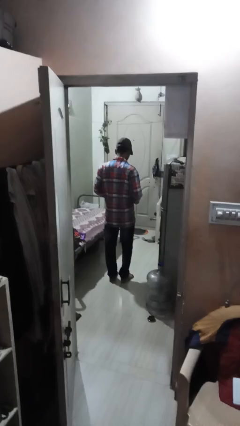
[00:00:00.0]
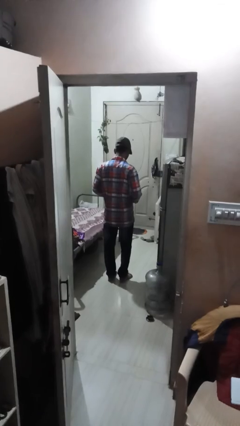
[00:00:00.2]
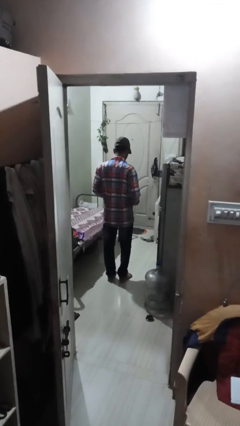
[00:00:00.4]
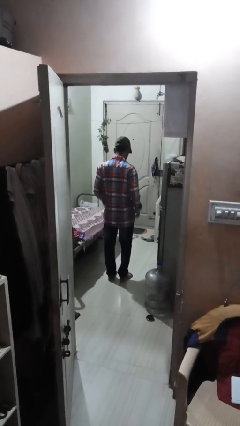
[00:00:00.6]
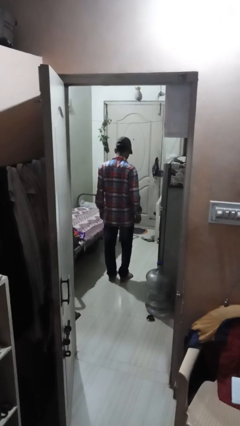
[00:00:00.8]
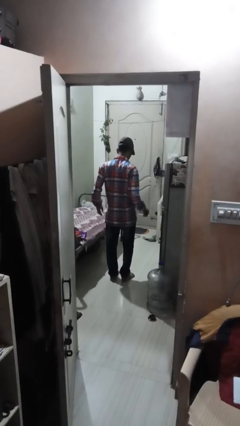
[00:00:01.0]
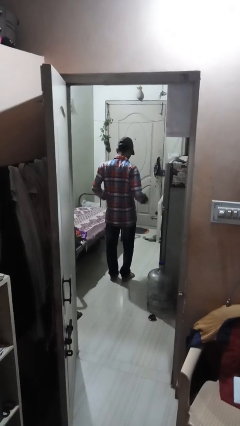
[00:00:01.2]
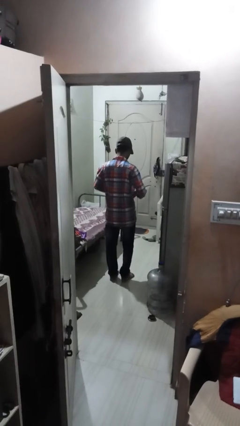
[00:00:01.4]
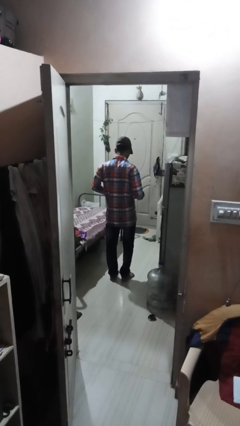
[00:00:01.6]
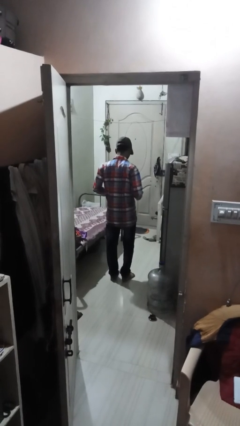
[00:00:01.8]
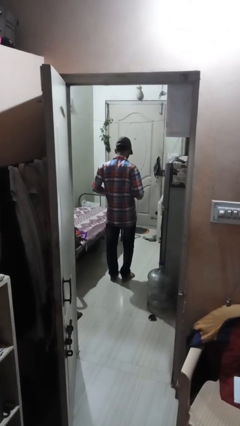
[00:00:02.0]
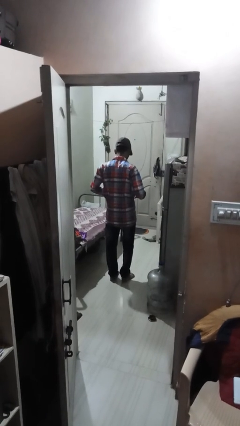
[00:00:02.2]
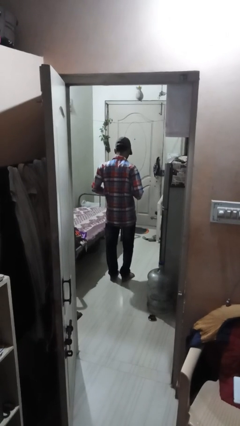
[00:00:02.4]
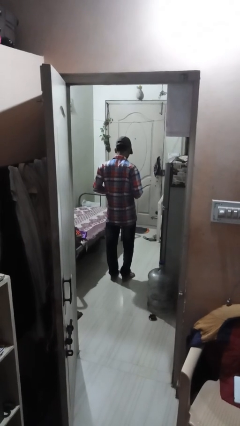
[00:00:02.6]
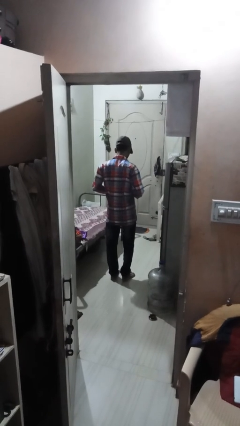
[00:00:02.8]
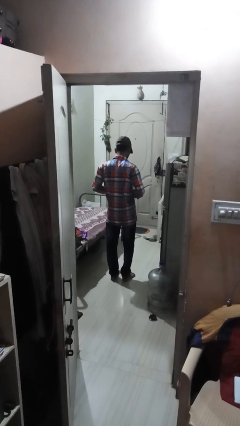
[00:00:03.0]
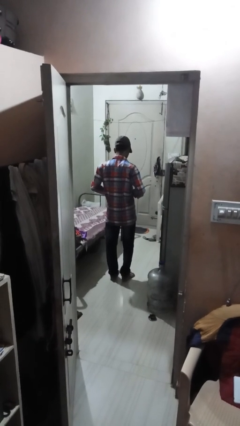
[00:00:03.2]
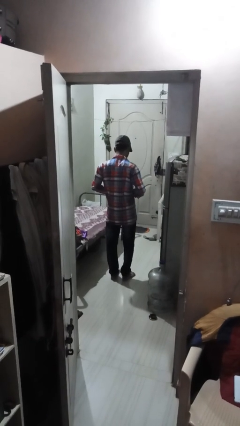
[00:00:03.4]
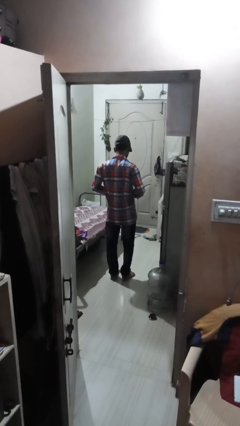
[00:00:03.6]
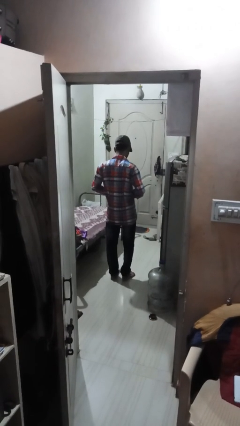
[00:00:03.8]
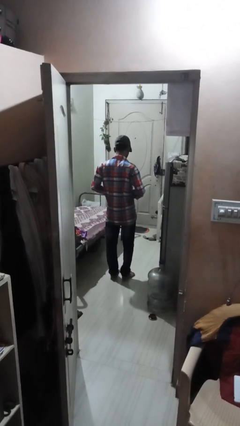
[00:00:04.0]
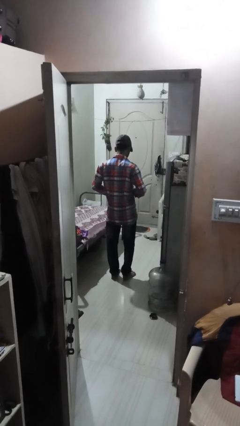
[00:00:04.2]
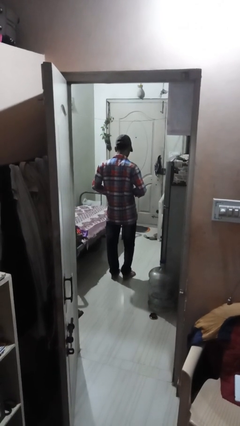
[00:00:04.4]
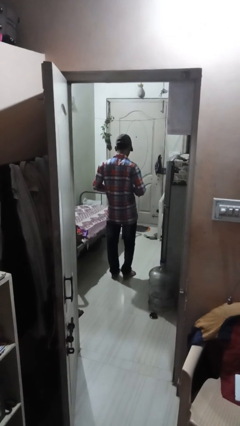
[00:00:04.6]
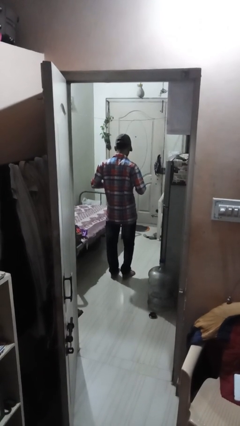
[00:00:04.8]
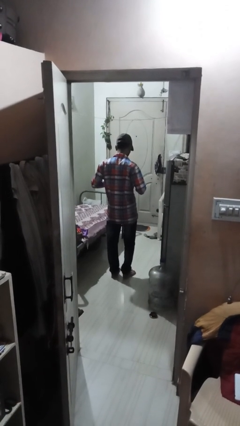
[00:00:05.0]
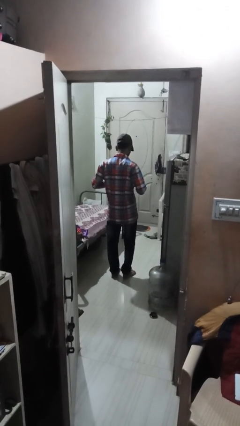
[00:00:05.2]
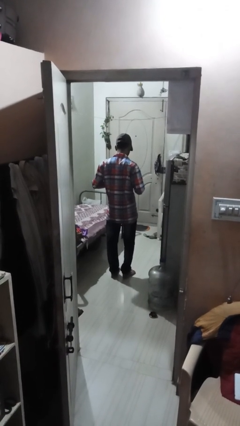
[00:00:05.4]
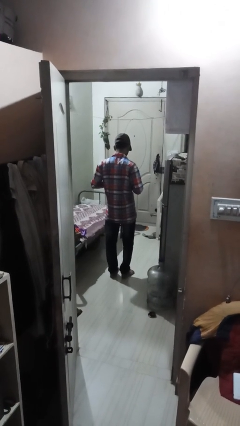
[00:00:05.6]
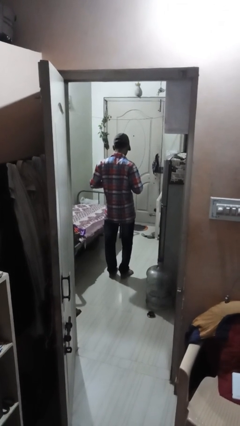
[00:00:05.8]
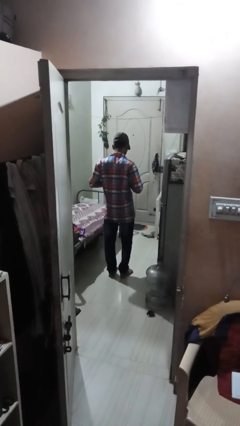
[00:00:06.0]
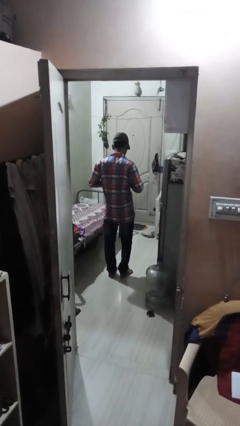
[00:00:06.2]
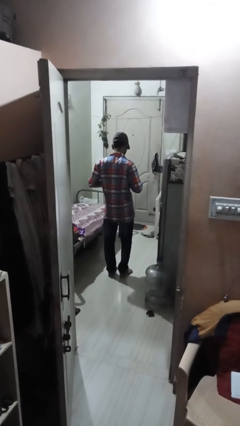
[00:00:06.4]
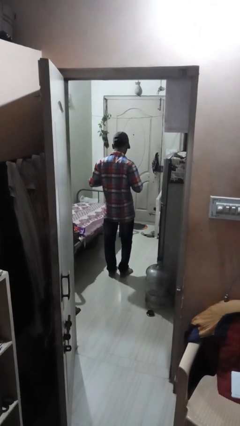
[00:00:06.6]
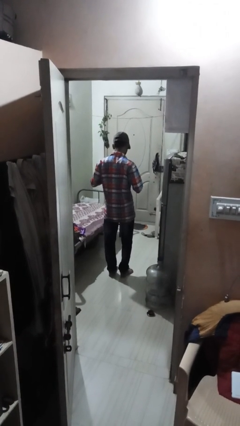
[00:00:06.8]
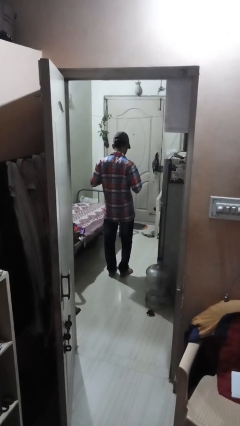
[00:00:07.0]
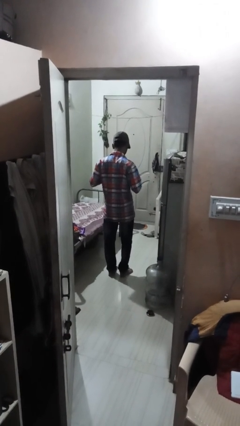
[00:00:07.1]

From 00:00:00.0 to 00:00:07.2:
person buttons shirt

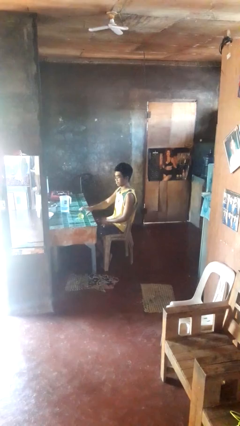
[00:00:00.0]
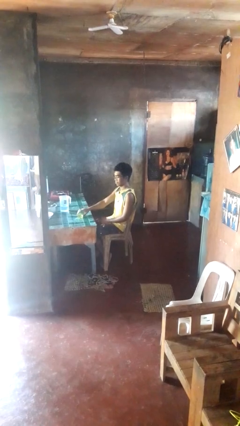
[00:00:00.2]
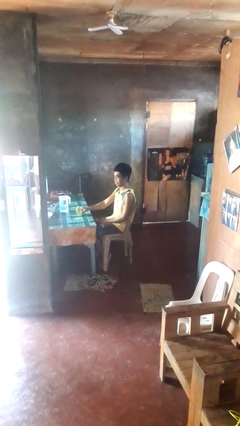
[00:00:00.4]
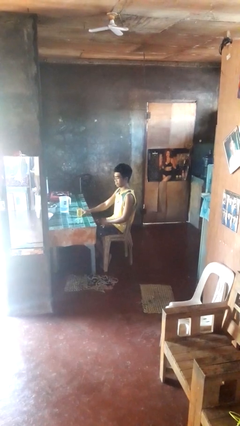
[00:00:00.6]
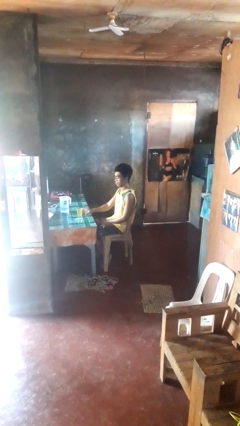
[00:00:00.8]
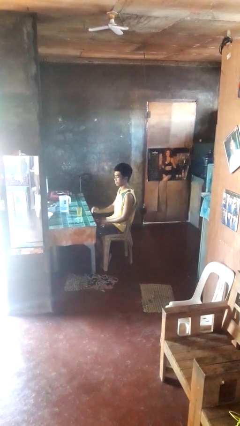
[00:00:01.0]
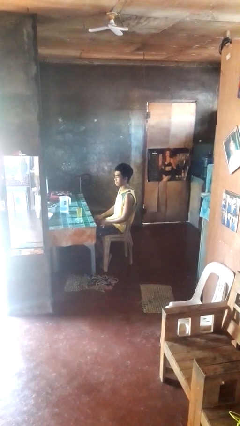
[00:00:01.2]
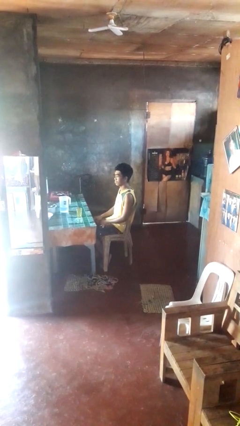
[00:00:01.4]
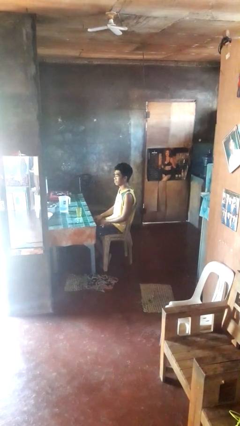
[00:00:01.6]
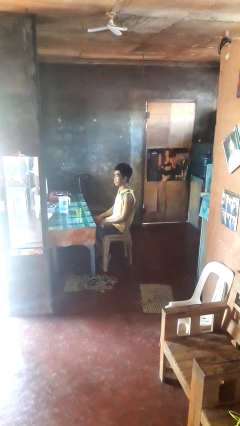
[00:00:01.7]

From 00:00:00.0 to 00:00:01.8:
person sets upright glass

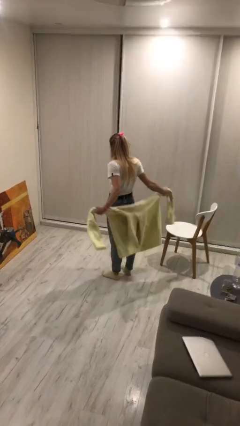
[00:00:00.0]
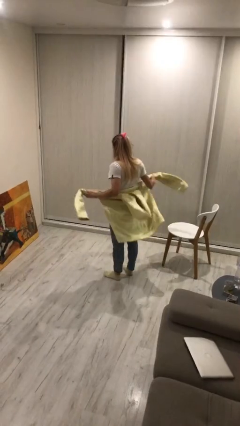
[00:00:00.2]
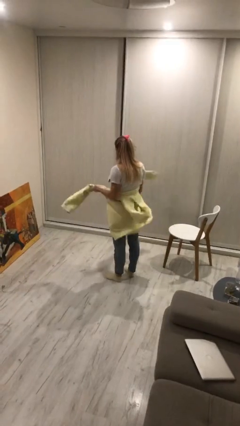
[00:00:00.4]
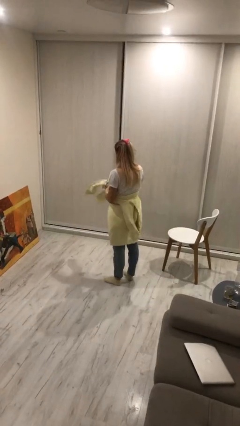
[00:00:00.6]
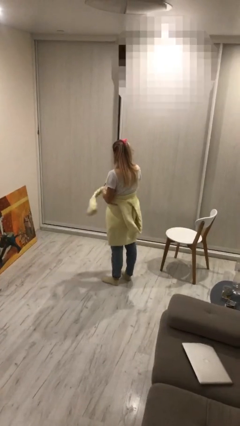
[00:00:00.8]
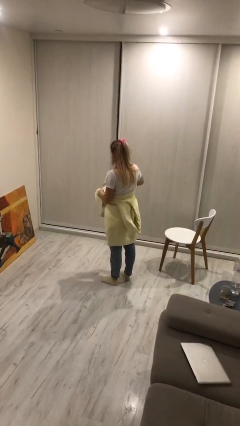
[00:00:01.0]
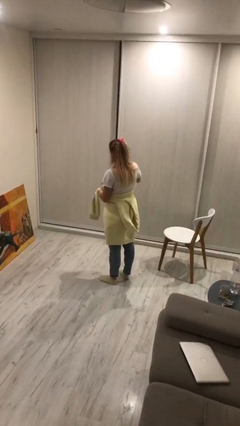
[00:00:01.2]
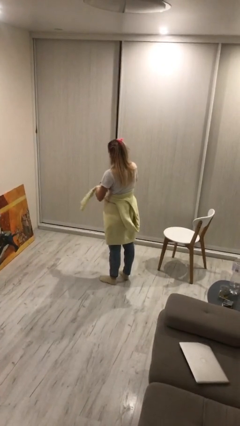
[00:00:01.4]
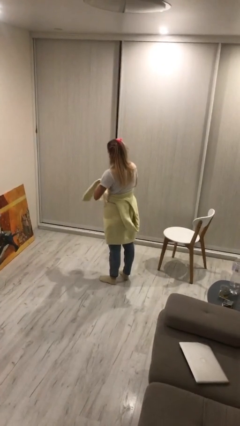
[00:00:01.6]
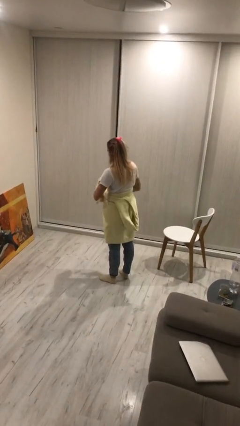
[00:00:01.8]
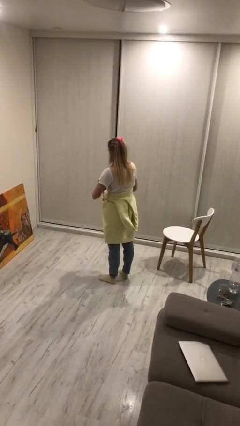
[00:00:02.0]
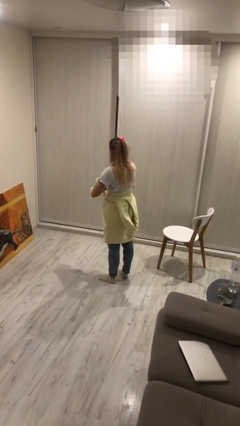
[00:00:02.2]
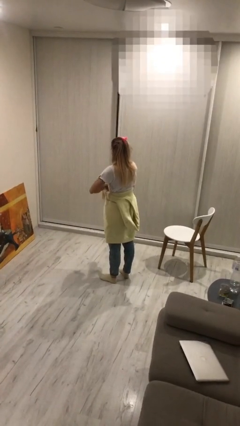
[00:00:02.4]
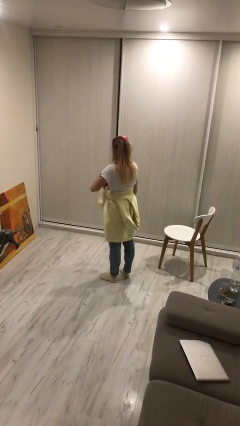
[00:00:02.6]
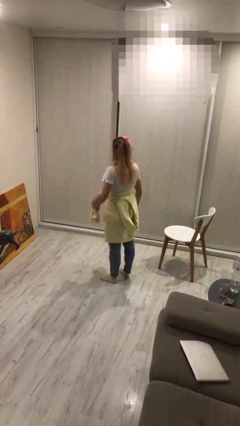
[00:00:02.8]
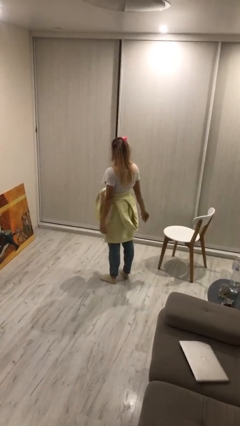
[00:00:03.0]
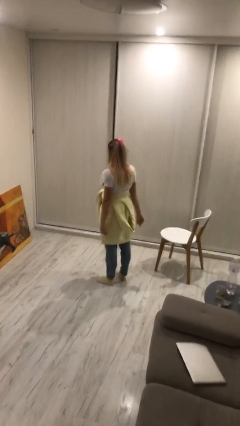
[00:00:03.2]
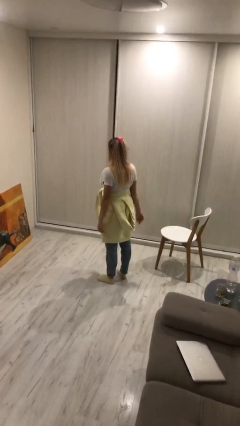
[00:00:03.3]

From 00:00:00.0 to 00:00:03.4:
person ties jacket around waist

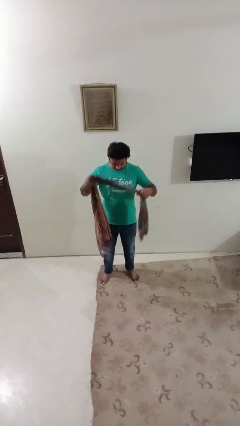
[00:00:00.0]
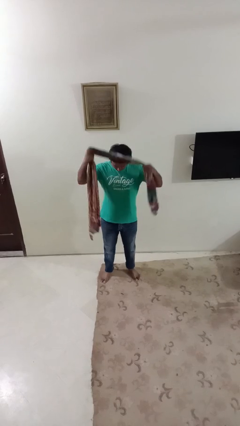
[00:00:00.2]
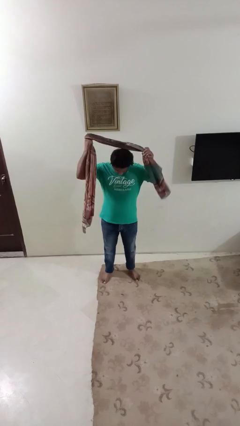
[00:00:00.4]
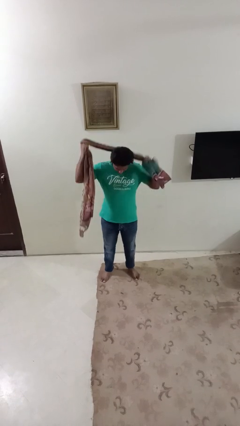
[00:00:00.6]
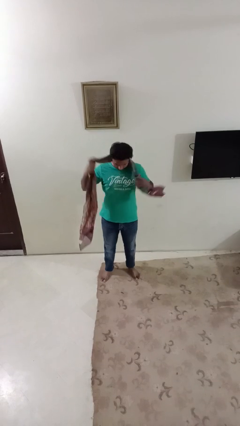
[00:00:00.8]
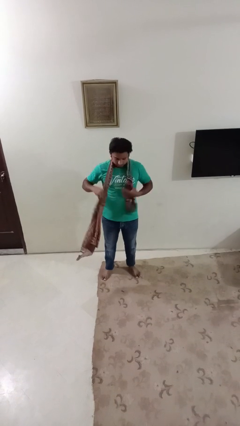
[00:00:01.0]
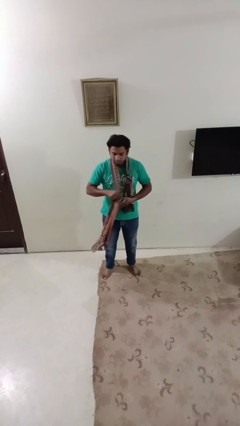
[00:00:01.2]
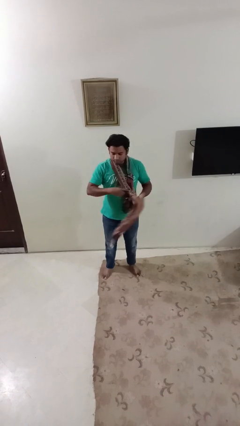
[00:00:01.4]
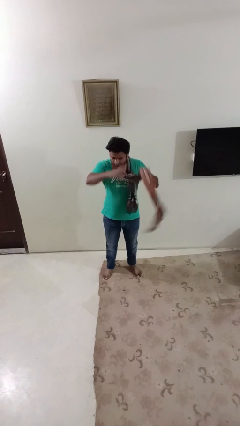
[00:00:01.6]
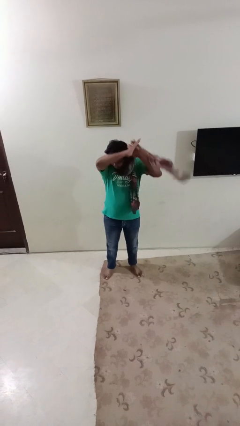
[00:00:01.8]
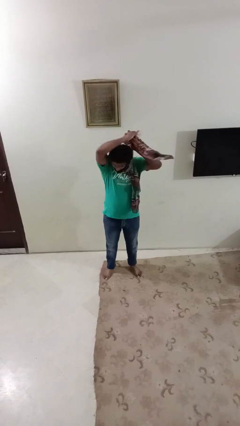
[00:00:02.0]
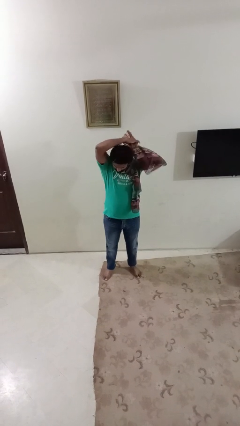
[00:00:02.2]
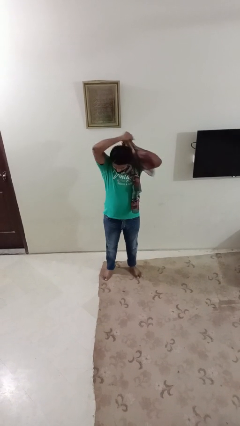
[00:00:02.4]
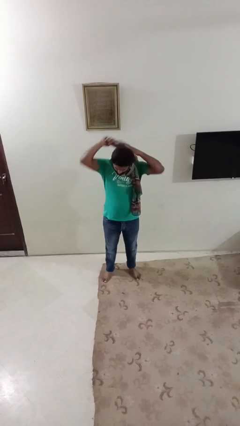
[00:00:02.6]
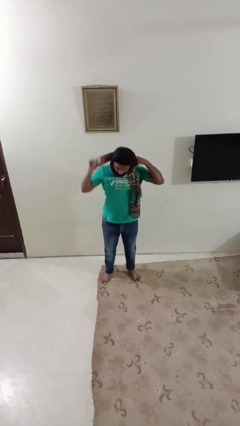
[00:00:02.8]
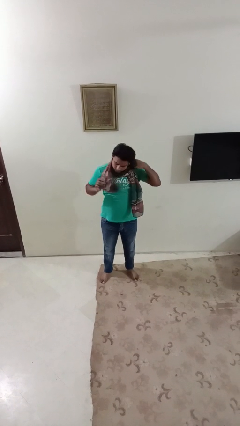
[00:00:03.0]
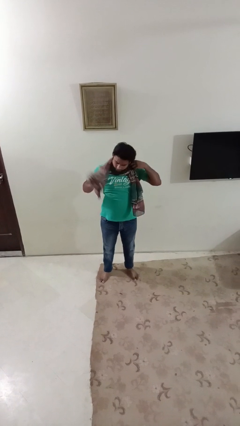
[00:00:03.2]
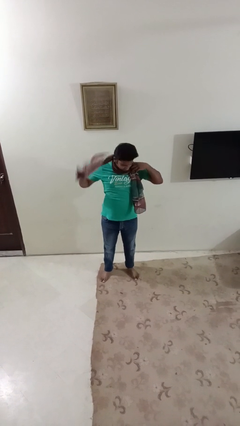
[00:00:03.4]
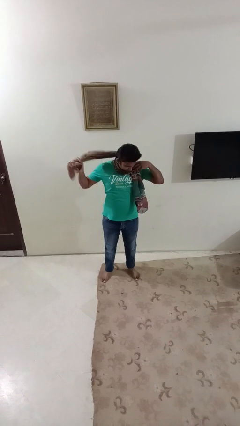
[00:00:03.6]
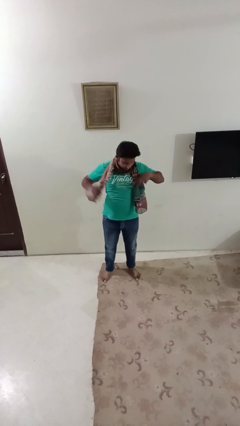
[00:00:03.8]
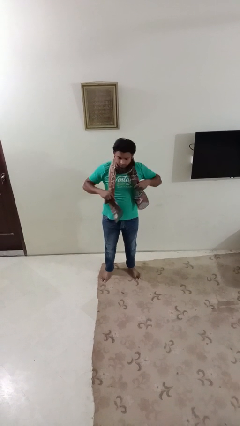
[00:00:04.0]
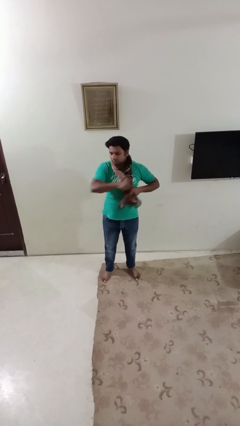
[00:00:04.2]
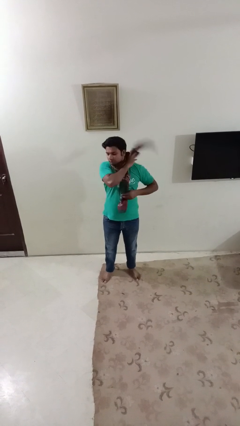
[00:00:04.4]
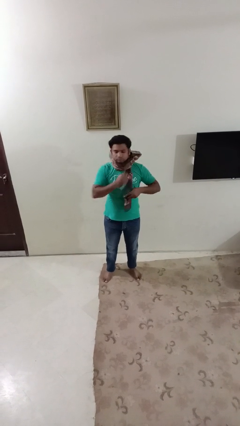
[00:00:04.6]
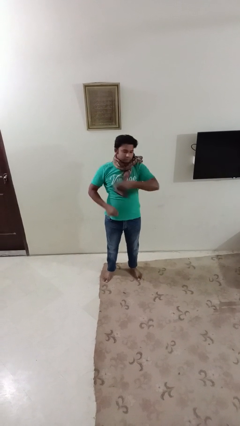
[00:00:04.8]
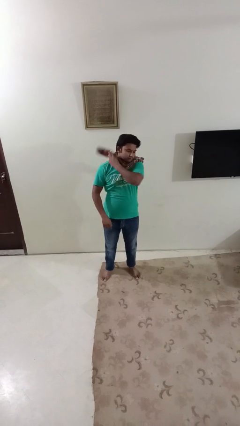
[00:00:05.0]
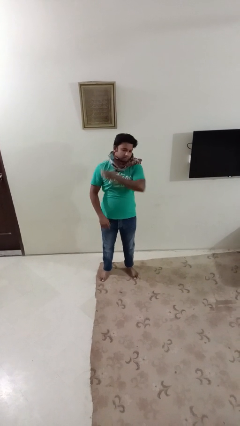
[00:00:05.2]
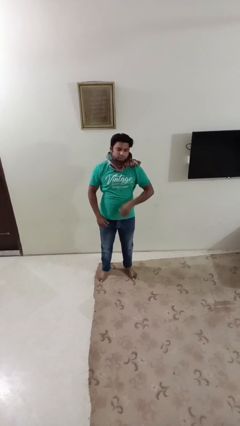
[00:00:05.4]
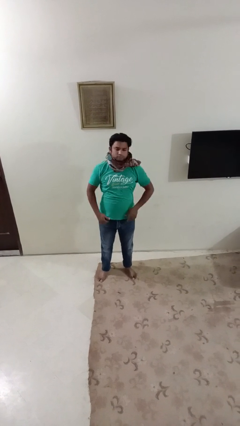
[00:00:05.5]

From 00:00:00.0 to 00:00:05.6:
person puts on scarf
